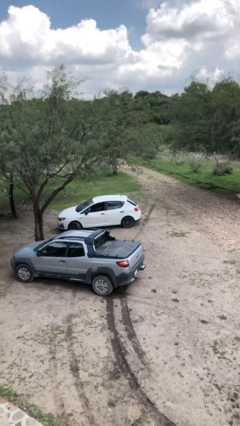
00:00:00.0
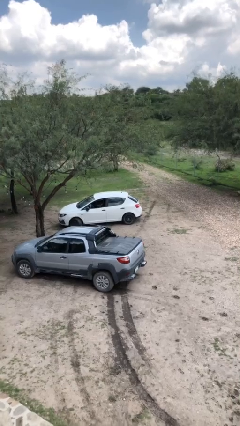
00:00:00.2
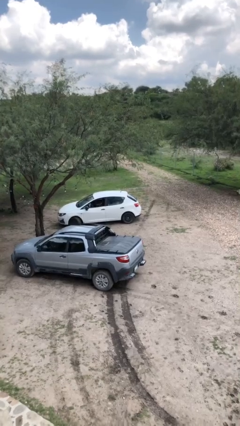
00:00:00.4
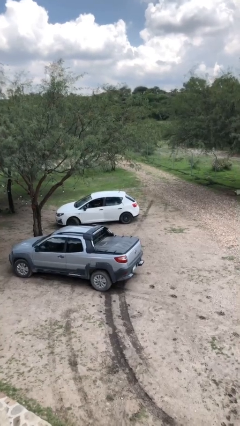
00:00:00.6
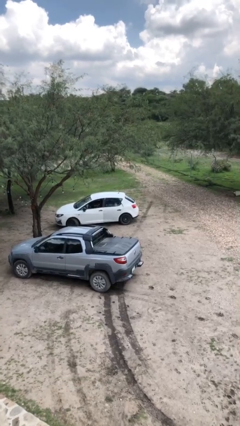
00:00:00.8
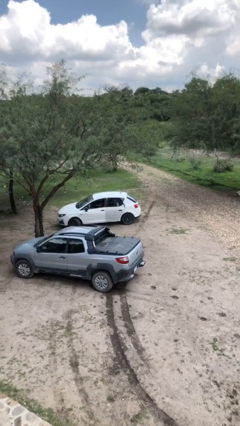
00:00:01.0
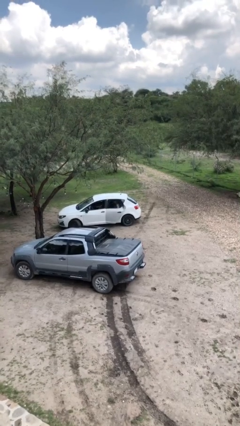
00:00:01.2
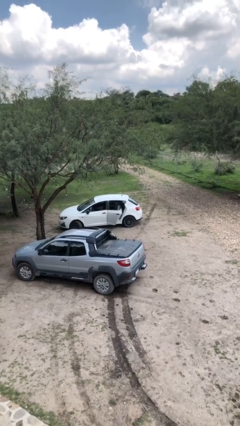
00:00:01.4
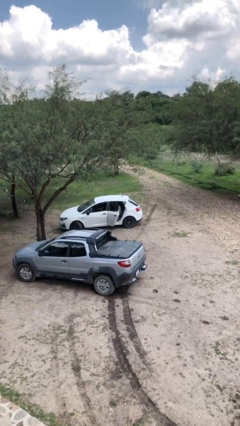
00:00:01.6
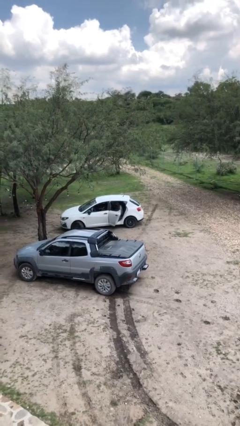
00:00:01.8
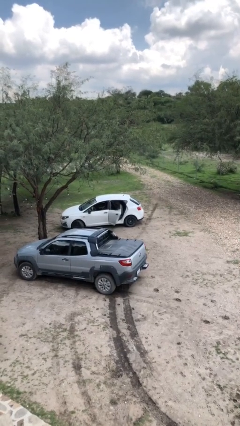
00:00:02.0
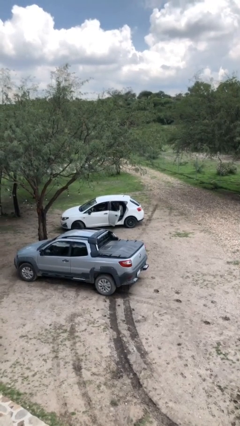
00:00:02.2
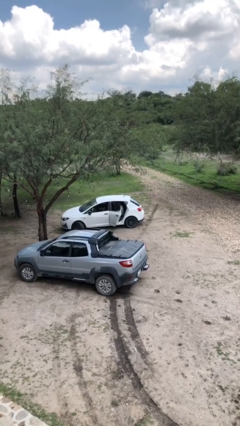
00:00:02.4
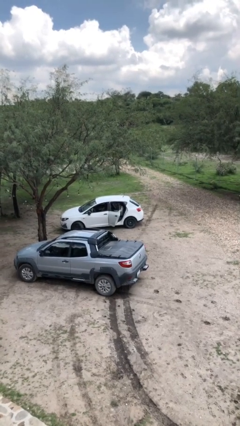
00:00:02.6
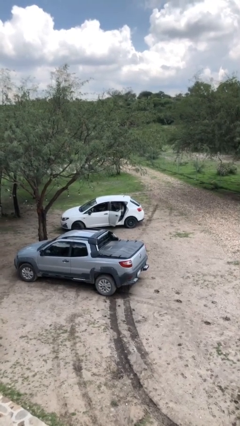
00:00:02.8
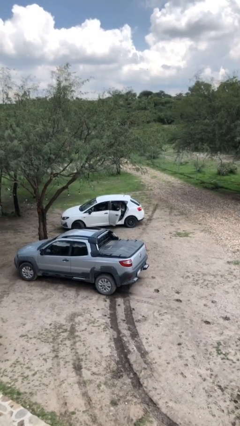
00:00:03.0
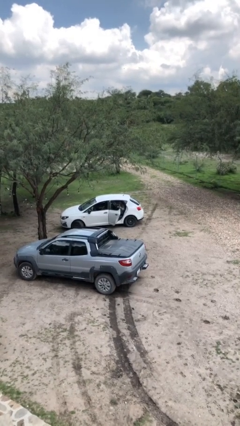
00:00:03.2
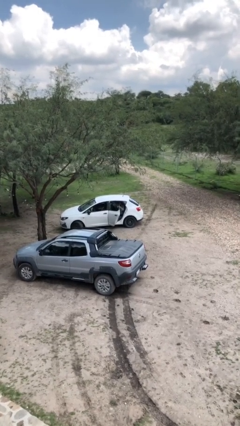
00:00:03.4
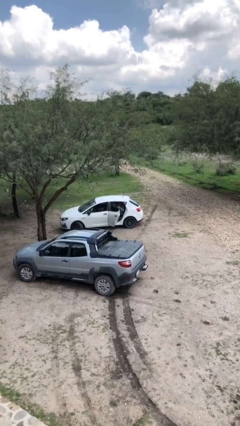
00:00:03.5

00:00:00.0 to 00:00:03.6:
person opens car door

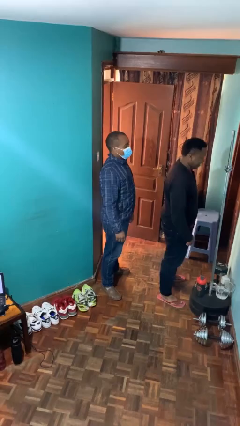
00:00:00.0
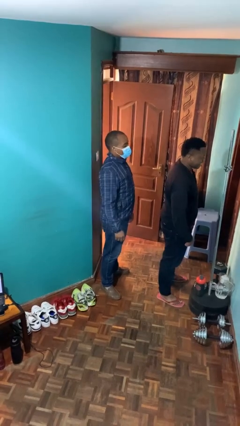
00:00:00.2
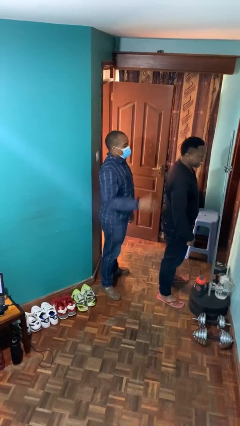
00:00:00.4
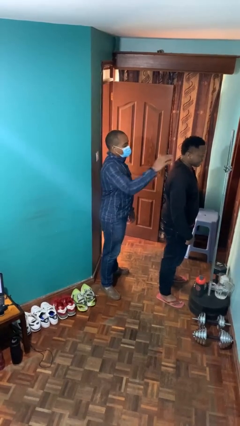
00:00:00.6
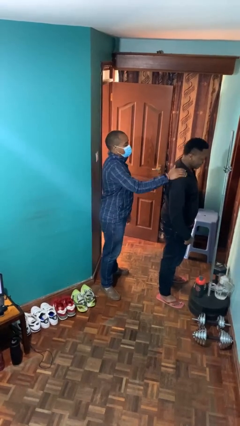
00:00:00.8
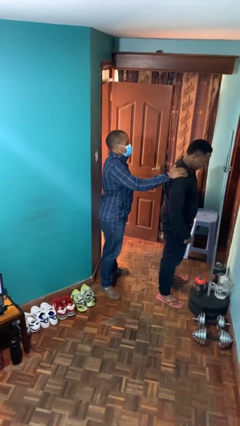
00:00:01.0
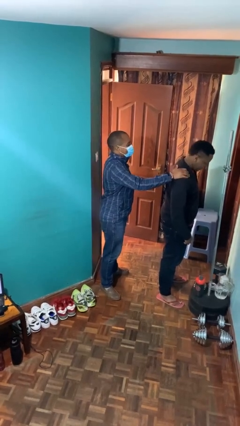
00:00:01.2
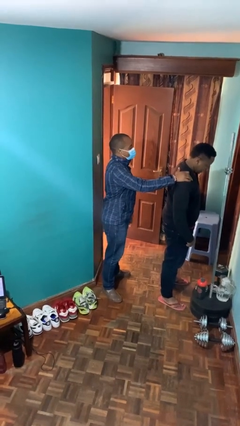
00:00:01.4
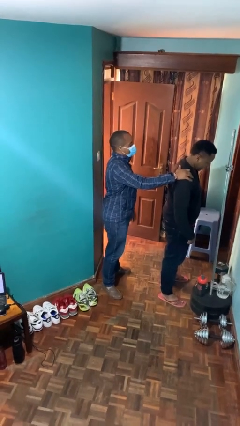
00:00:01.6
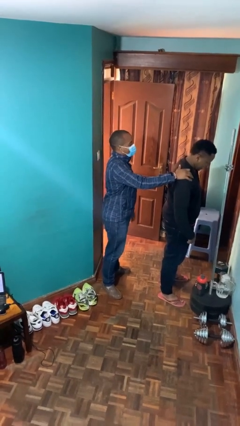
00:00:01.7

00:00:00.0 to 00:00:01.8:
person grabs person by shoulder

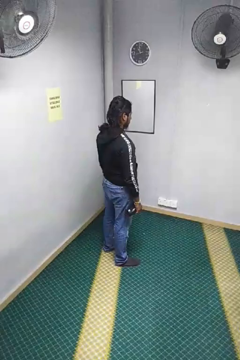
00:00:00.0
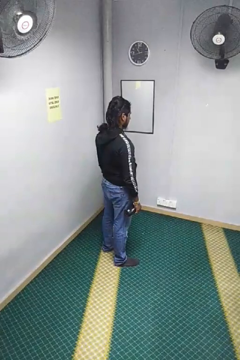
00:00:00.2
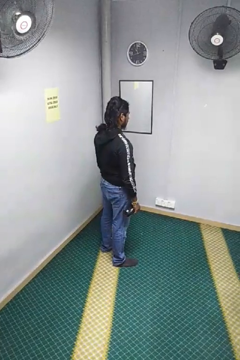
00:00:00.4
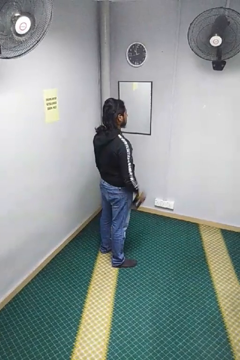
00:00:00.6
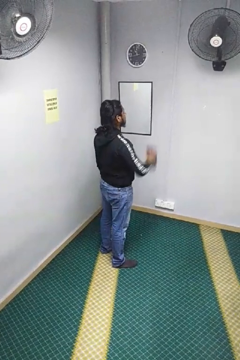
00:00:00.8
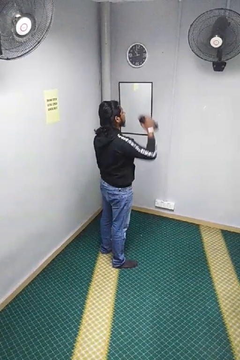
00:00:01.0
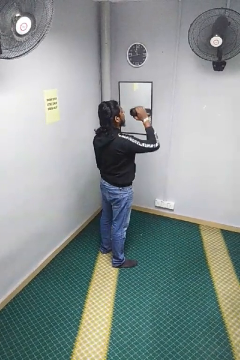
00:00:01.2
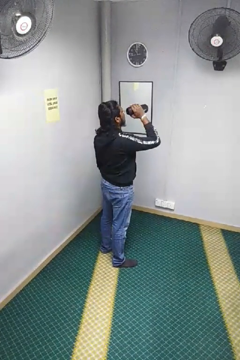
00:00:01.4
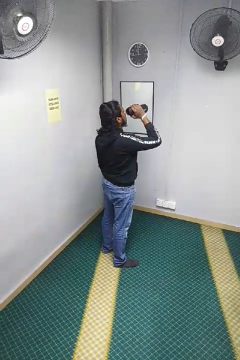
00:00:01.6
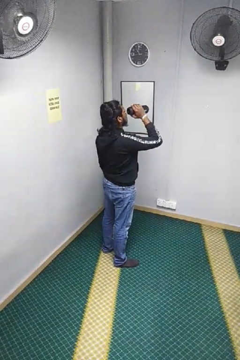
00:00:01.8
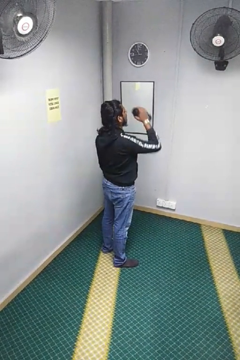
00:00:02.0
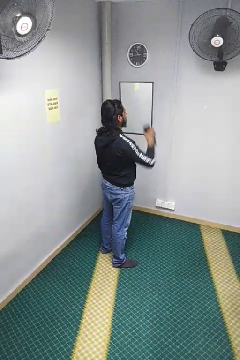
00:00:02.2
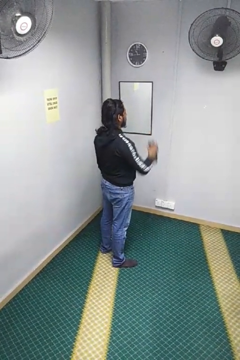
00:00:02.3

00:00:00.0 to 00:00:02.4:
person drinks from bottle

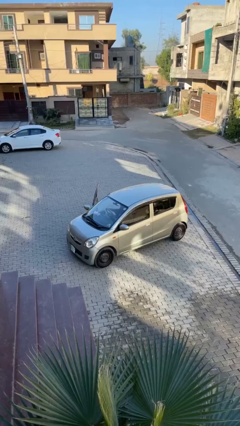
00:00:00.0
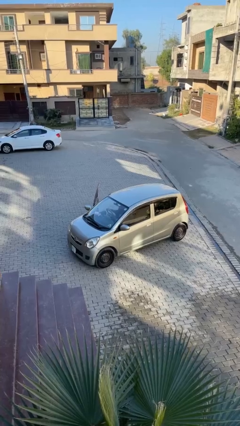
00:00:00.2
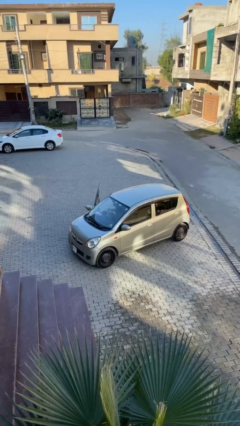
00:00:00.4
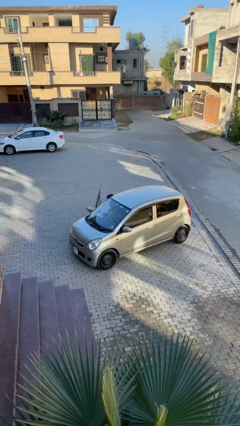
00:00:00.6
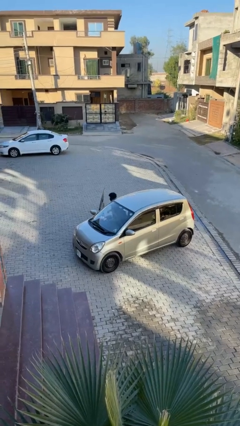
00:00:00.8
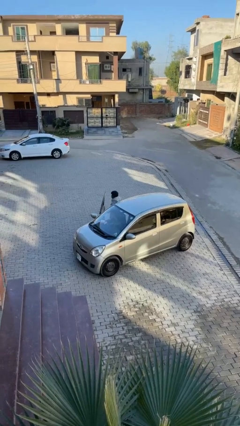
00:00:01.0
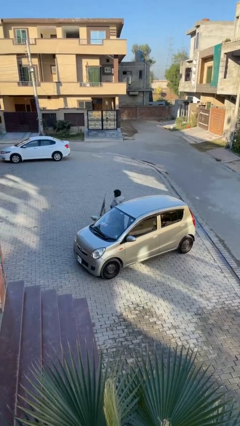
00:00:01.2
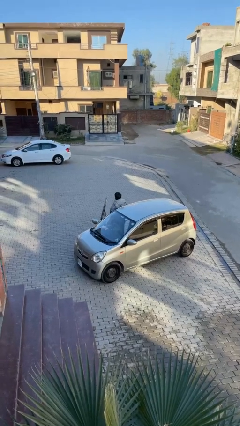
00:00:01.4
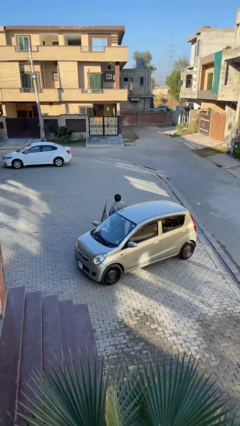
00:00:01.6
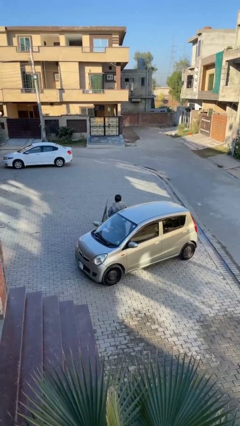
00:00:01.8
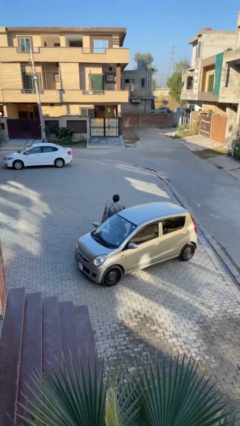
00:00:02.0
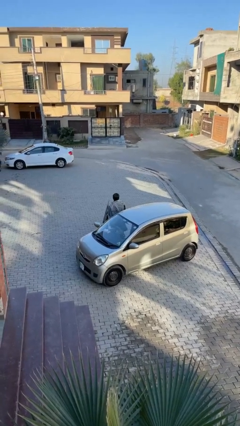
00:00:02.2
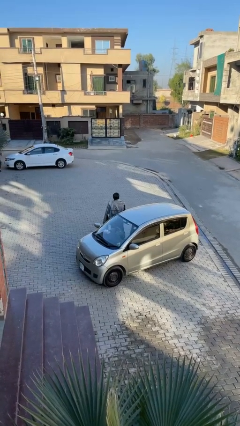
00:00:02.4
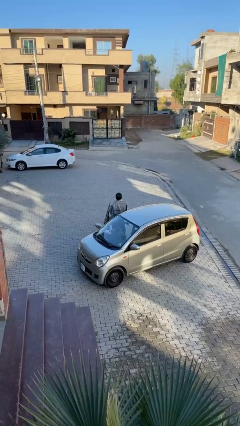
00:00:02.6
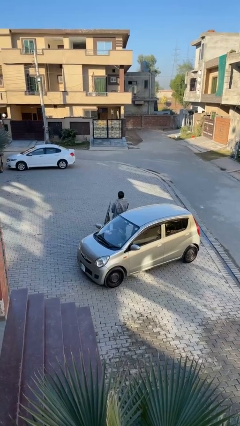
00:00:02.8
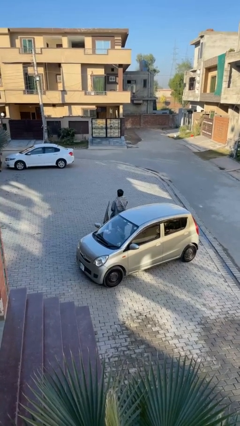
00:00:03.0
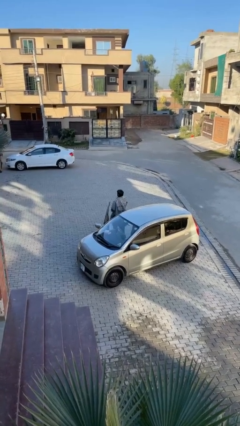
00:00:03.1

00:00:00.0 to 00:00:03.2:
person exits car

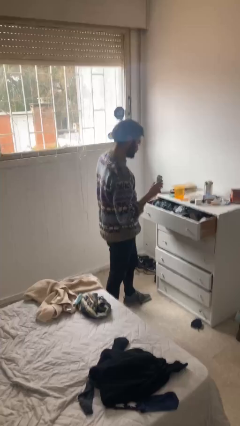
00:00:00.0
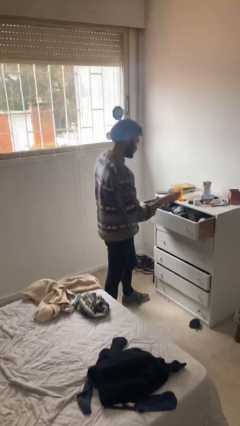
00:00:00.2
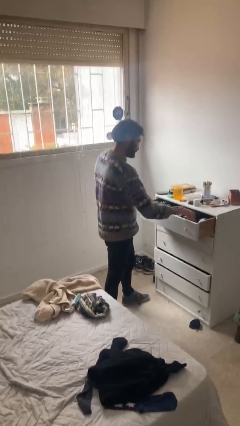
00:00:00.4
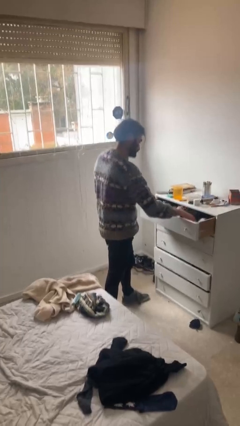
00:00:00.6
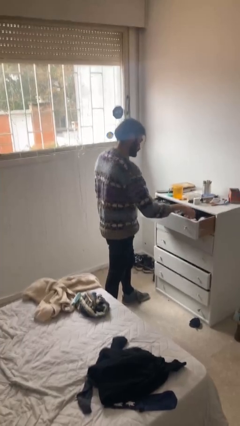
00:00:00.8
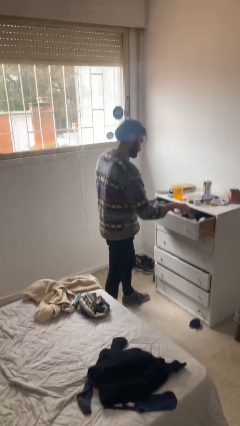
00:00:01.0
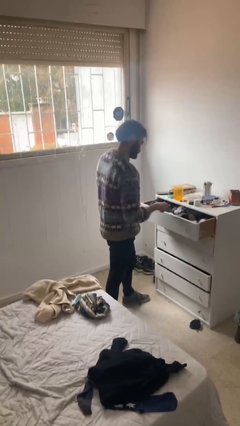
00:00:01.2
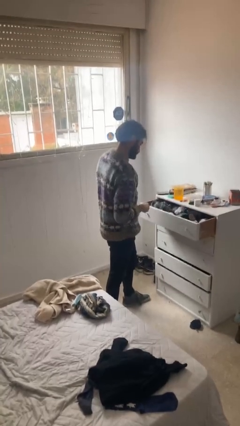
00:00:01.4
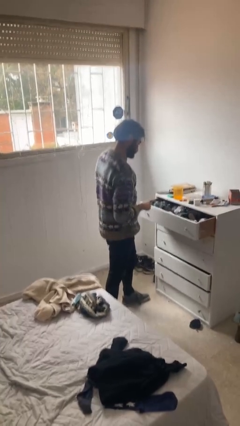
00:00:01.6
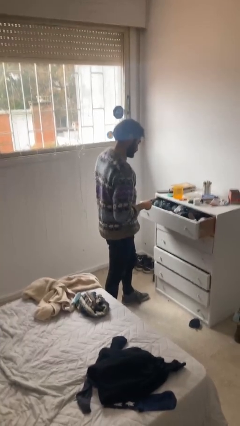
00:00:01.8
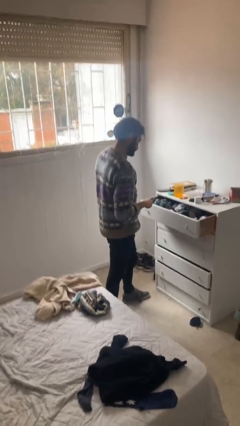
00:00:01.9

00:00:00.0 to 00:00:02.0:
person puts clothes into dresser

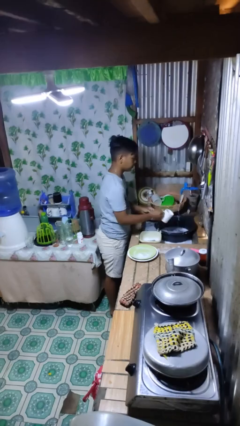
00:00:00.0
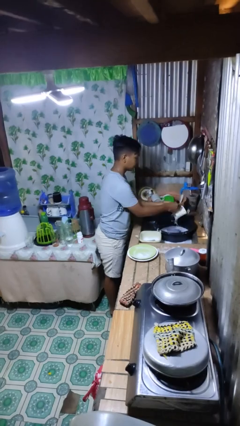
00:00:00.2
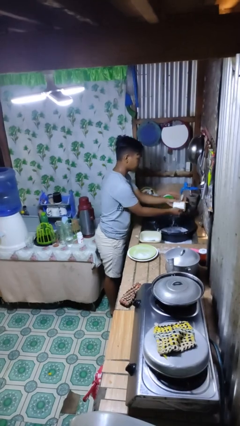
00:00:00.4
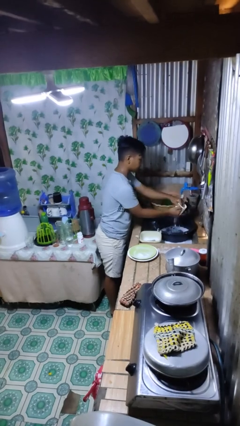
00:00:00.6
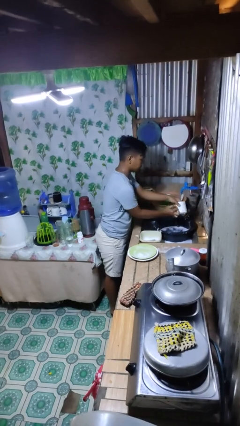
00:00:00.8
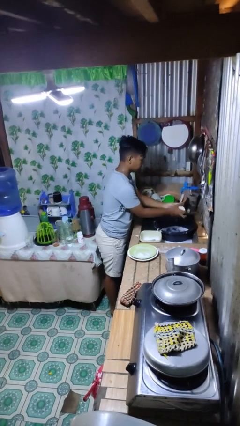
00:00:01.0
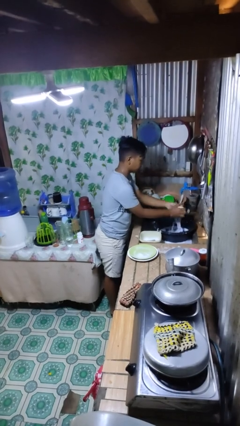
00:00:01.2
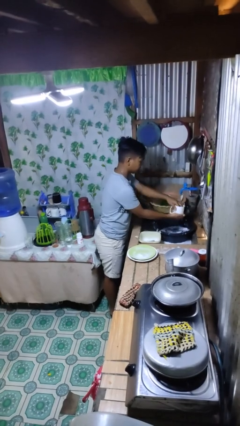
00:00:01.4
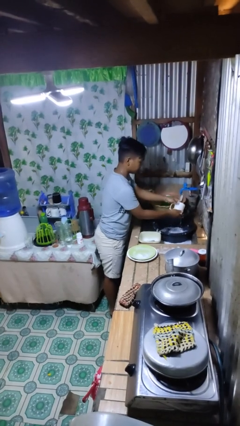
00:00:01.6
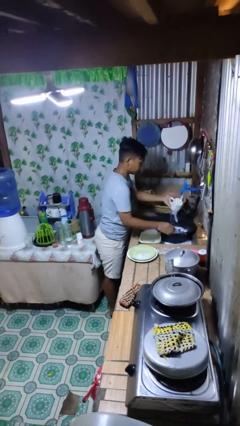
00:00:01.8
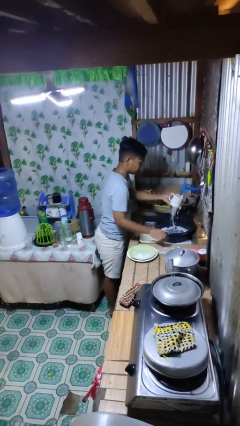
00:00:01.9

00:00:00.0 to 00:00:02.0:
person washes dish

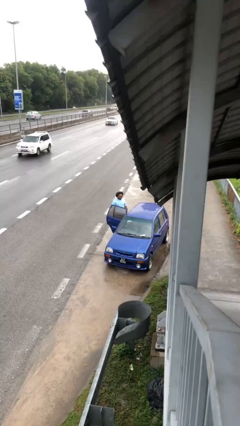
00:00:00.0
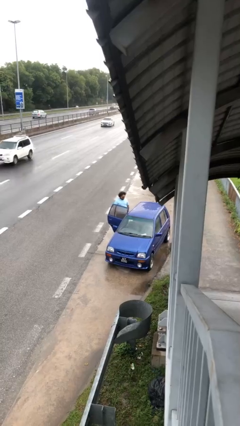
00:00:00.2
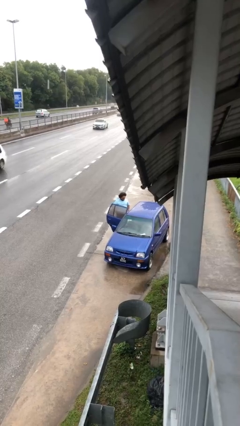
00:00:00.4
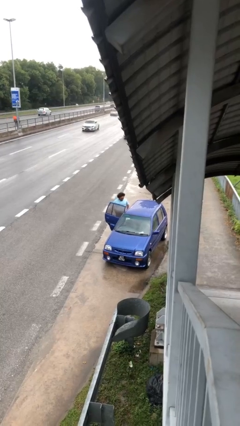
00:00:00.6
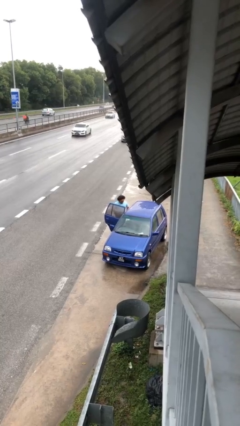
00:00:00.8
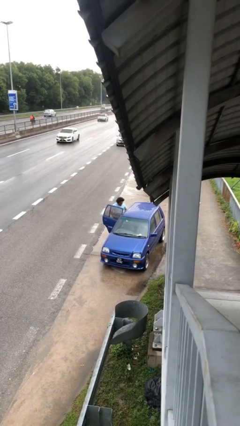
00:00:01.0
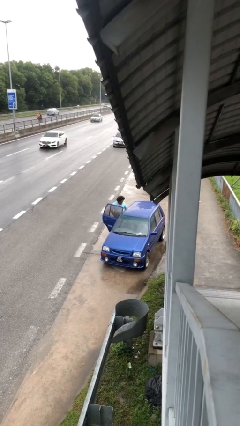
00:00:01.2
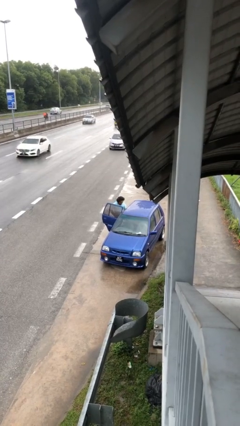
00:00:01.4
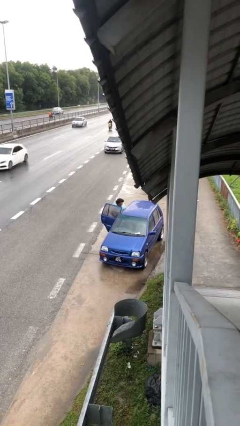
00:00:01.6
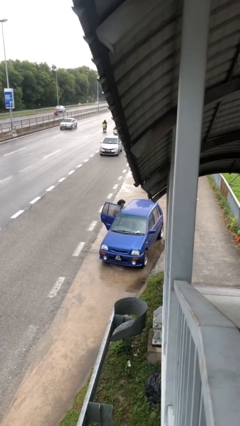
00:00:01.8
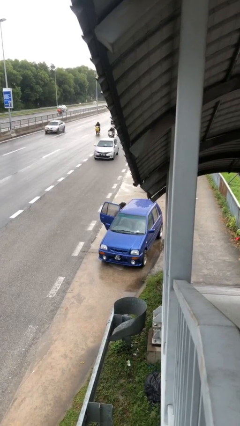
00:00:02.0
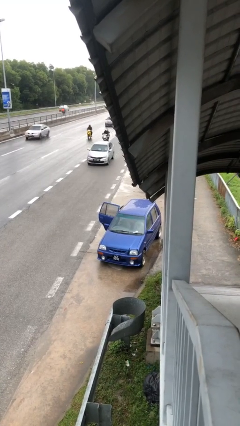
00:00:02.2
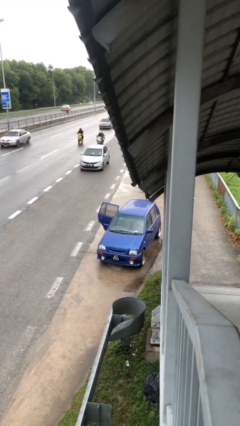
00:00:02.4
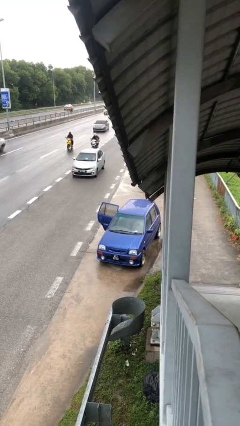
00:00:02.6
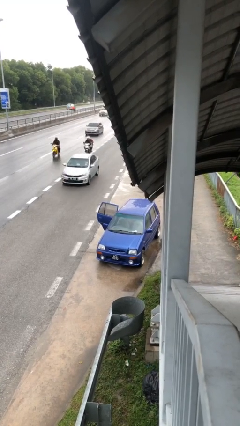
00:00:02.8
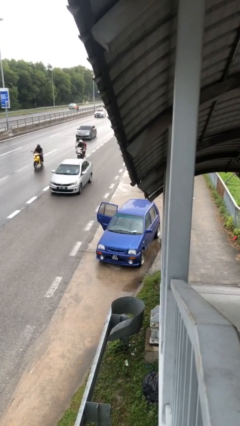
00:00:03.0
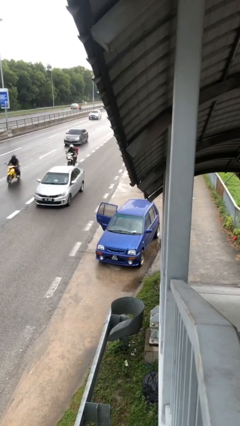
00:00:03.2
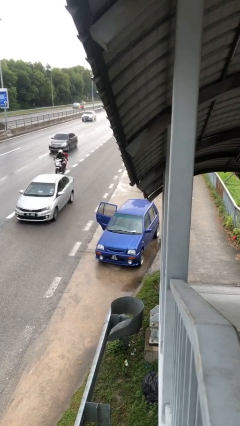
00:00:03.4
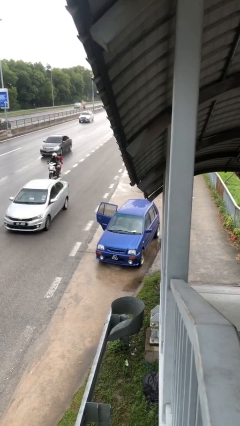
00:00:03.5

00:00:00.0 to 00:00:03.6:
person enters car
